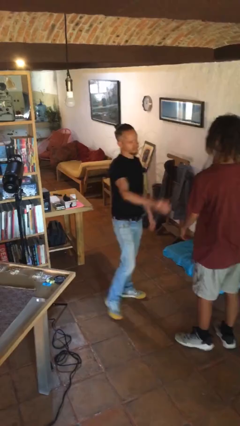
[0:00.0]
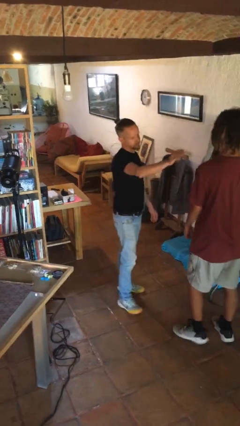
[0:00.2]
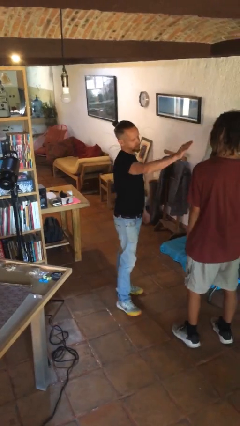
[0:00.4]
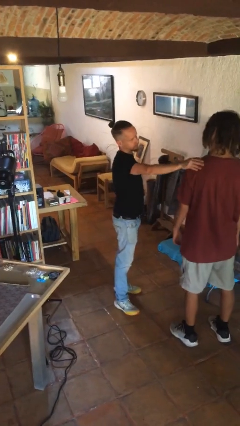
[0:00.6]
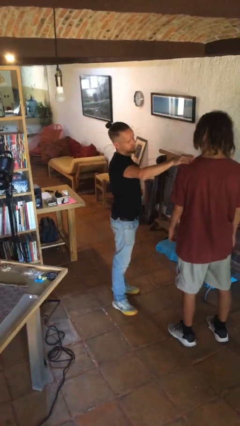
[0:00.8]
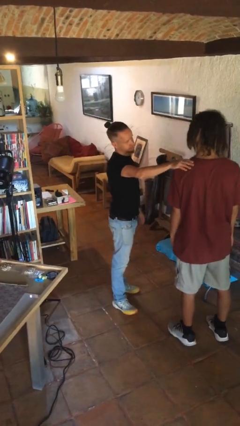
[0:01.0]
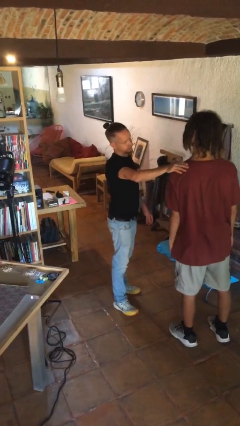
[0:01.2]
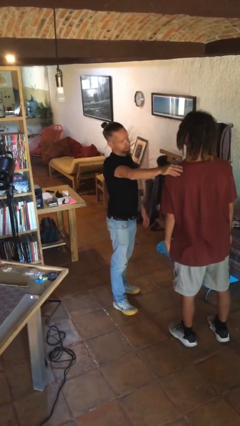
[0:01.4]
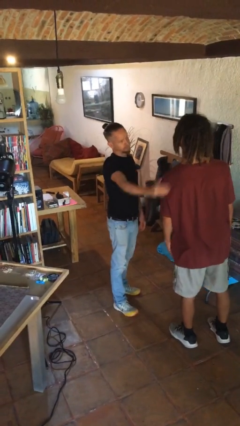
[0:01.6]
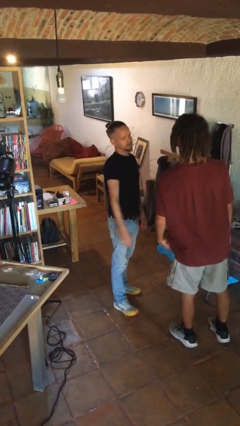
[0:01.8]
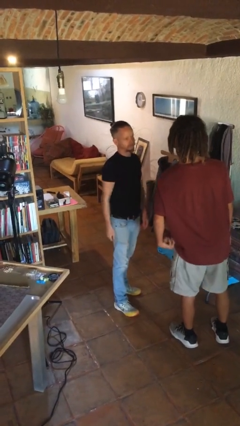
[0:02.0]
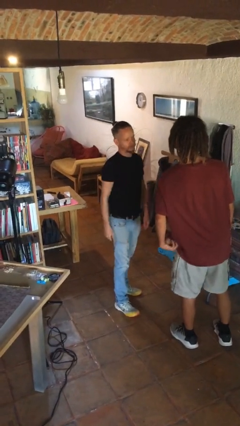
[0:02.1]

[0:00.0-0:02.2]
person pounds shoulders of person

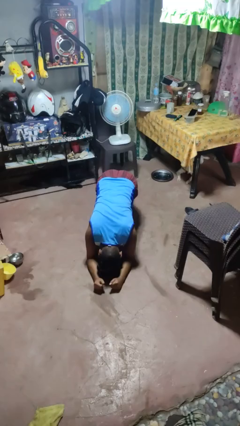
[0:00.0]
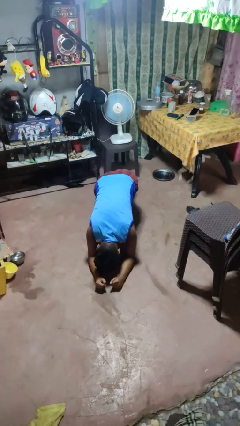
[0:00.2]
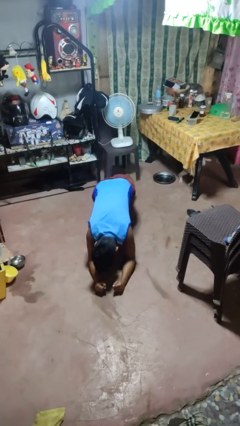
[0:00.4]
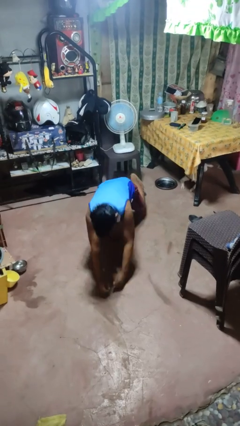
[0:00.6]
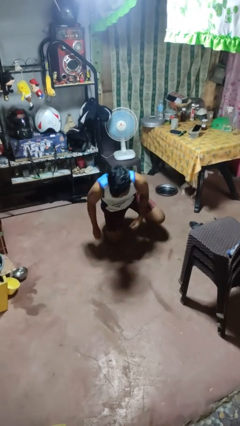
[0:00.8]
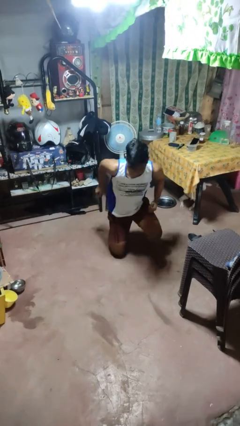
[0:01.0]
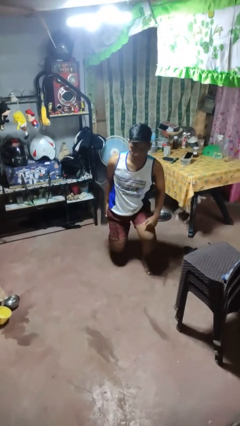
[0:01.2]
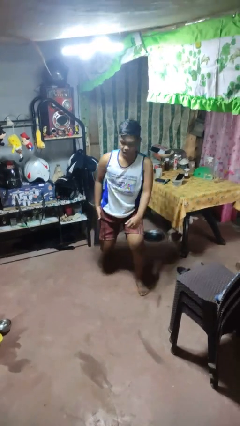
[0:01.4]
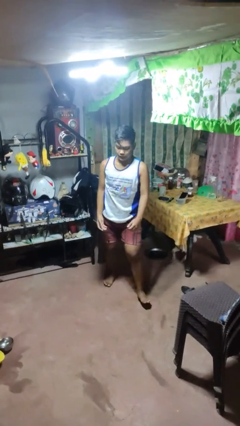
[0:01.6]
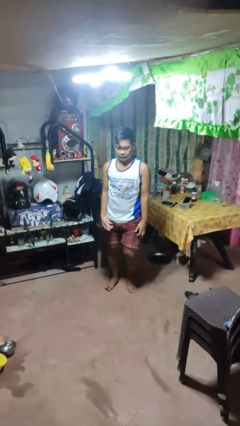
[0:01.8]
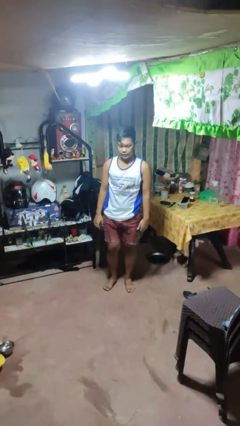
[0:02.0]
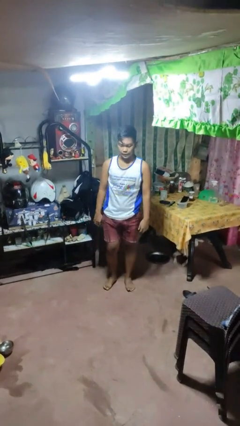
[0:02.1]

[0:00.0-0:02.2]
person stands up from floor

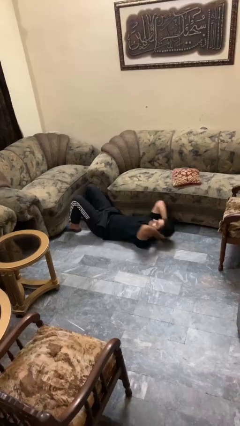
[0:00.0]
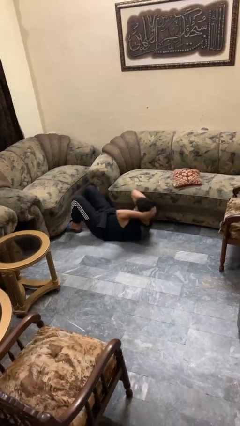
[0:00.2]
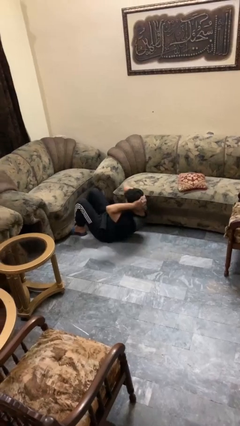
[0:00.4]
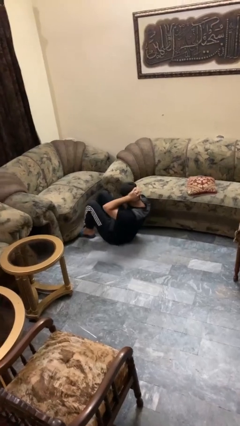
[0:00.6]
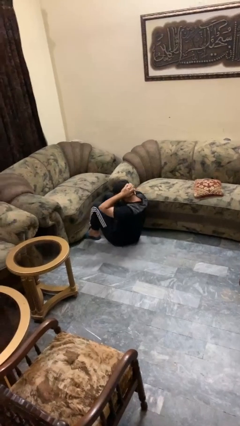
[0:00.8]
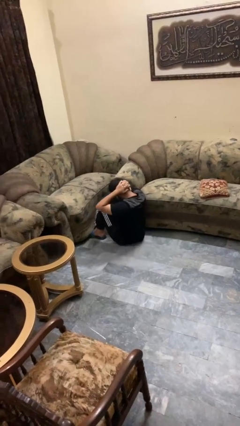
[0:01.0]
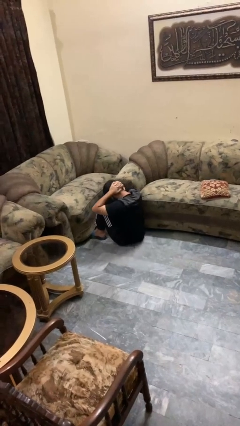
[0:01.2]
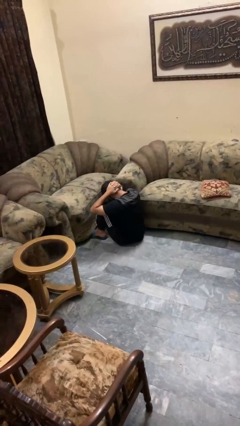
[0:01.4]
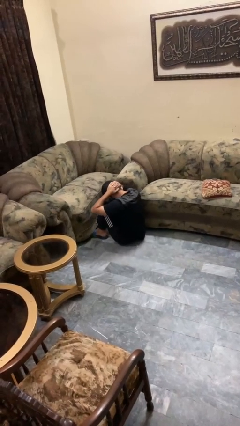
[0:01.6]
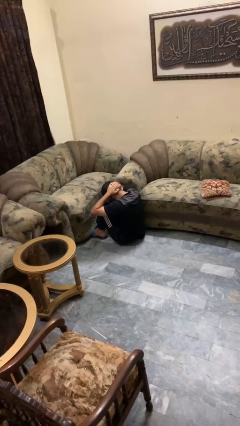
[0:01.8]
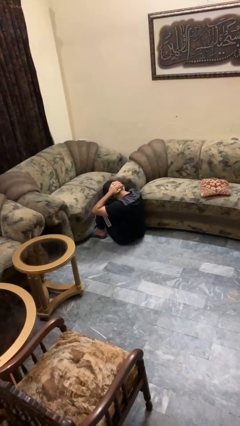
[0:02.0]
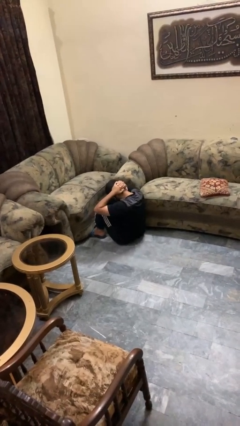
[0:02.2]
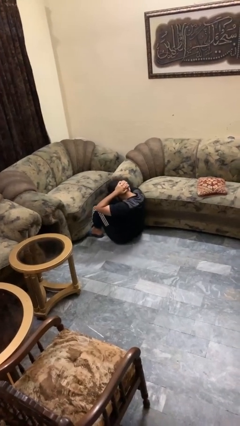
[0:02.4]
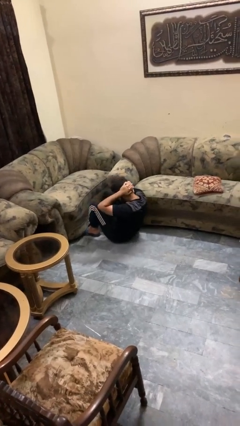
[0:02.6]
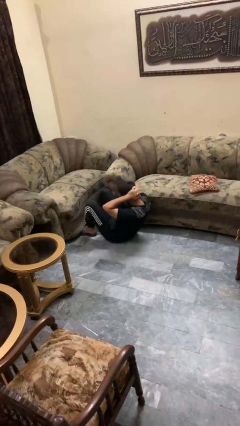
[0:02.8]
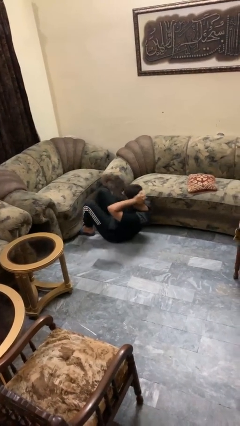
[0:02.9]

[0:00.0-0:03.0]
person exercises with situp

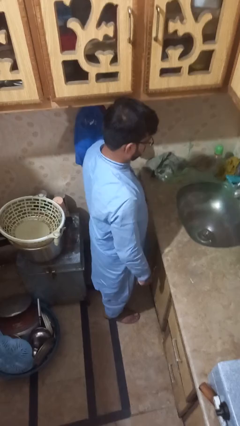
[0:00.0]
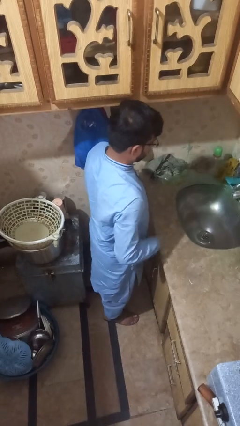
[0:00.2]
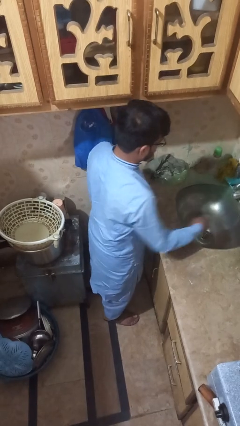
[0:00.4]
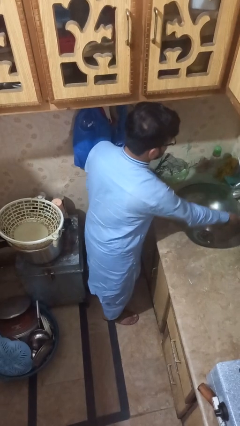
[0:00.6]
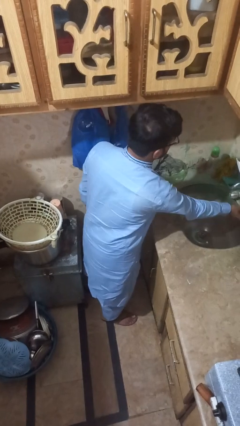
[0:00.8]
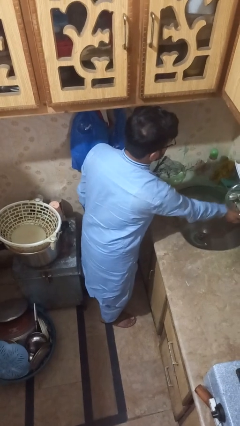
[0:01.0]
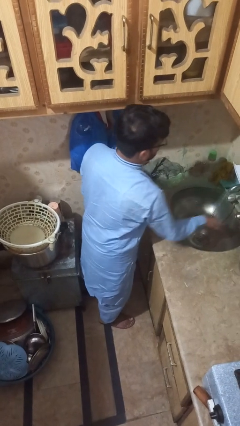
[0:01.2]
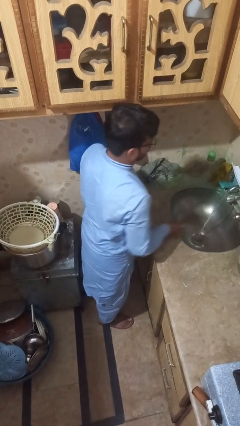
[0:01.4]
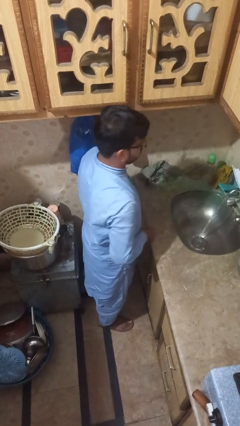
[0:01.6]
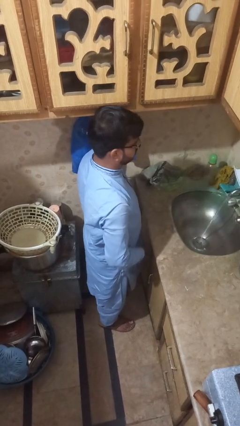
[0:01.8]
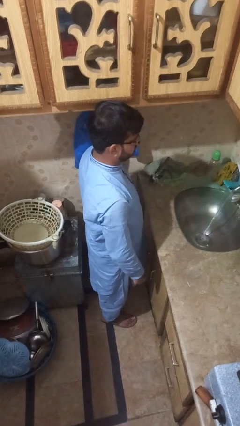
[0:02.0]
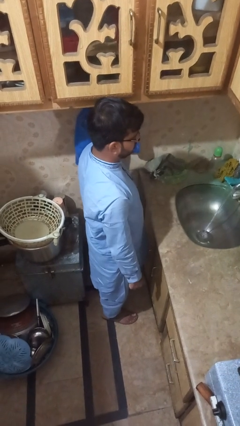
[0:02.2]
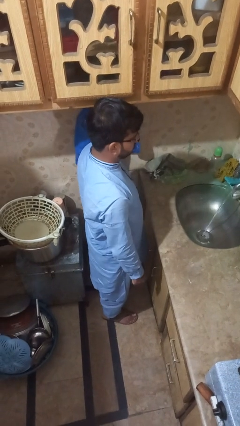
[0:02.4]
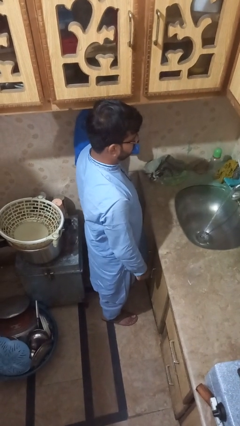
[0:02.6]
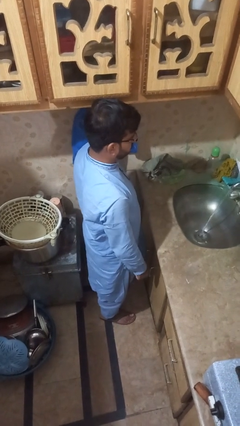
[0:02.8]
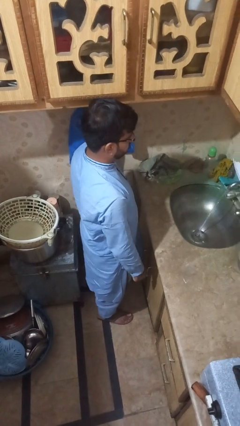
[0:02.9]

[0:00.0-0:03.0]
person turns on faucet

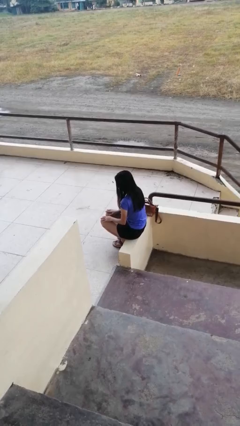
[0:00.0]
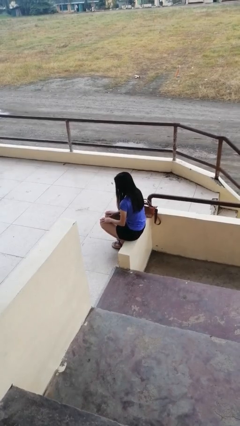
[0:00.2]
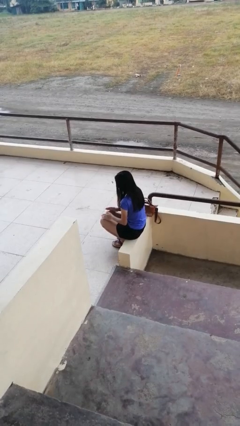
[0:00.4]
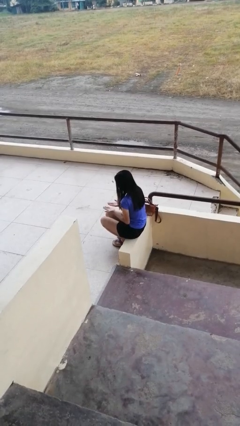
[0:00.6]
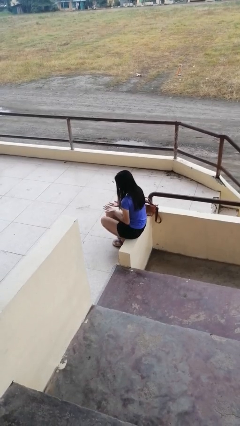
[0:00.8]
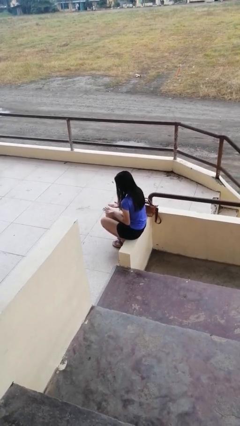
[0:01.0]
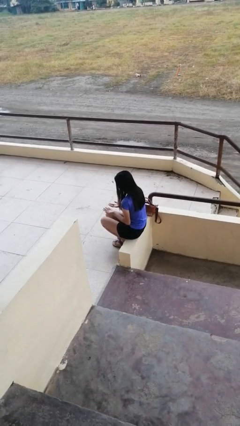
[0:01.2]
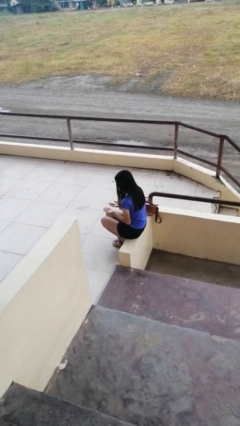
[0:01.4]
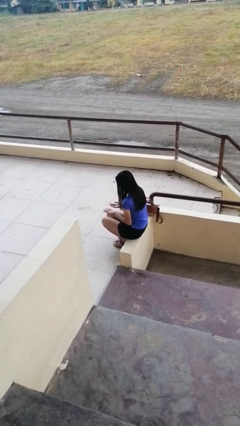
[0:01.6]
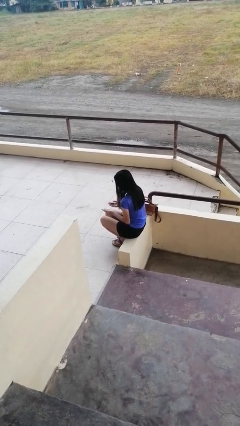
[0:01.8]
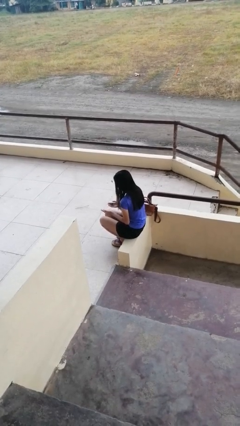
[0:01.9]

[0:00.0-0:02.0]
person looks at hands in lap

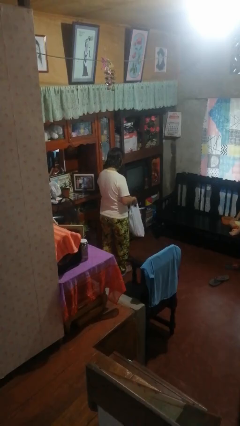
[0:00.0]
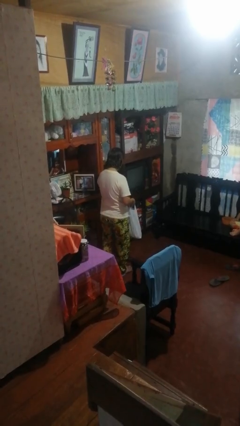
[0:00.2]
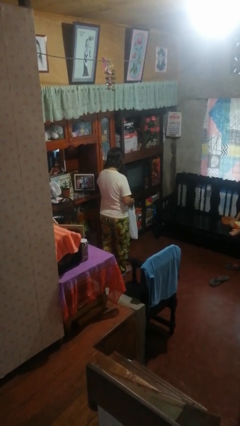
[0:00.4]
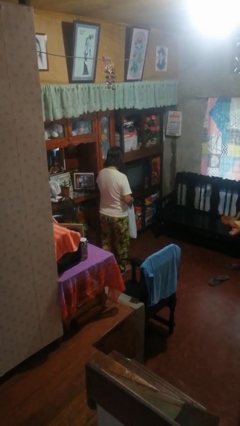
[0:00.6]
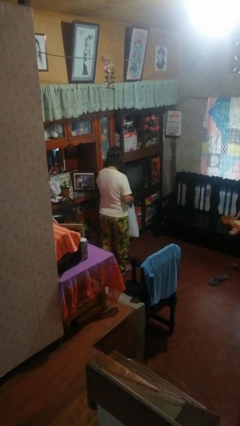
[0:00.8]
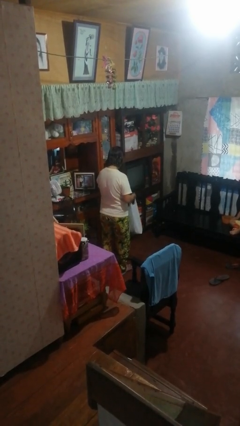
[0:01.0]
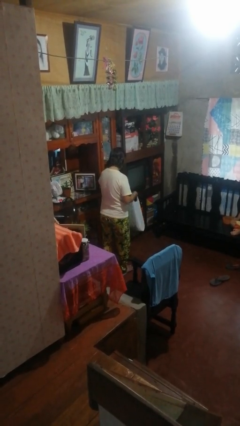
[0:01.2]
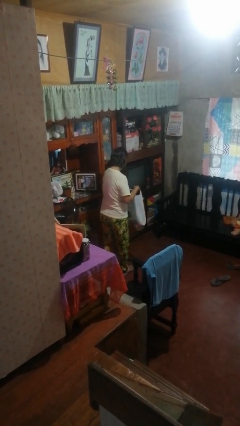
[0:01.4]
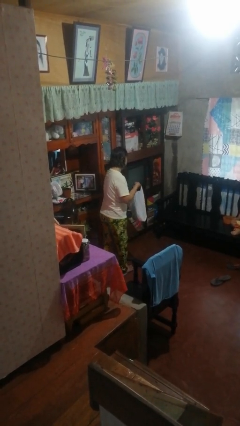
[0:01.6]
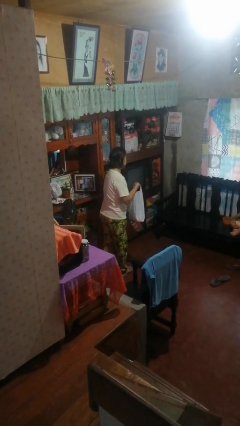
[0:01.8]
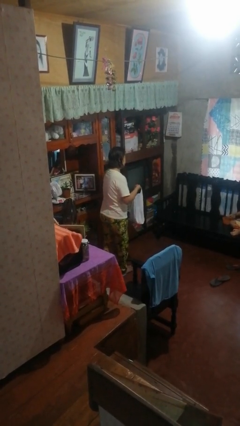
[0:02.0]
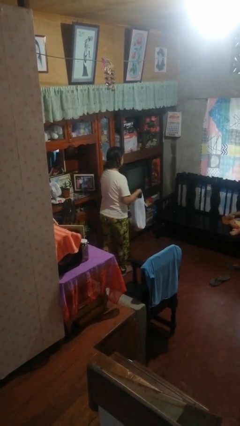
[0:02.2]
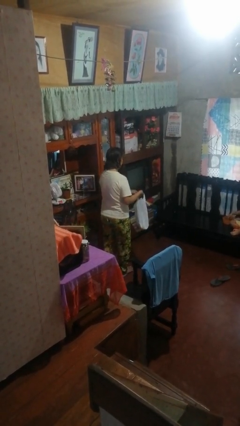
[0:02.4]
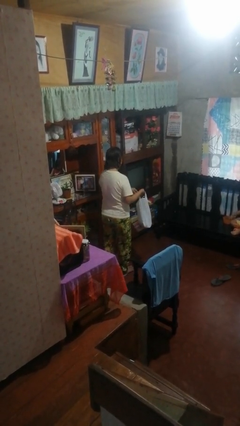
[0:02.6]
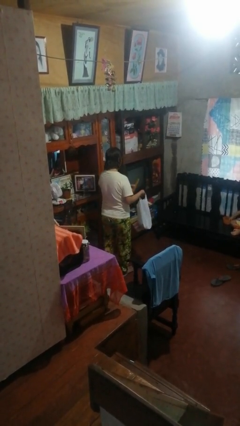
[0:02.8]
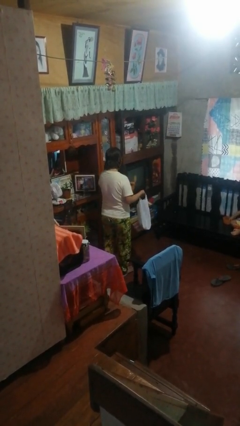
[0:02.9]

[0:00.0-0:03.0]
person takes object from bag

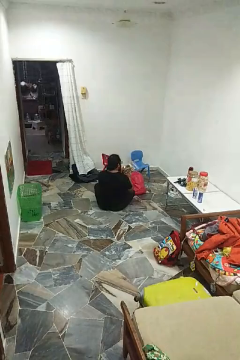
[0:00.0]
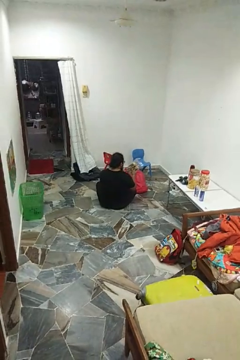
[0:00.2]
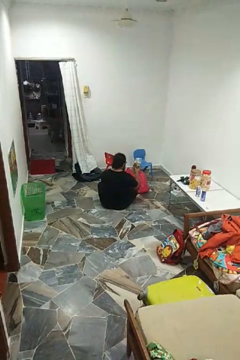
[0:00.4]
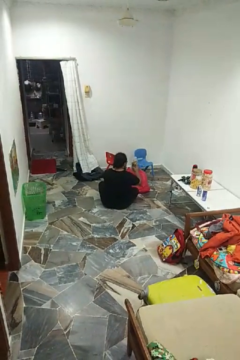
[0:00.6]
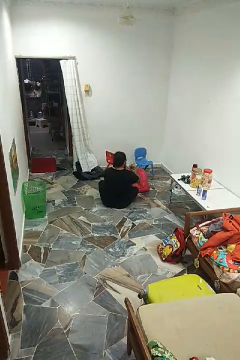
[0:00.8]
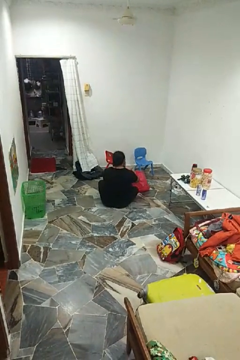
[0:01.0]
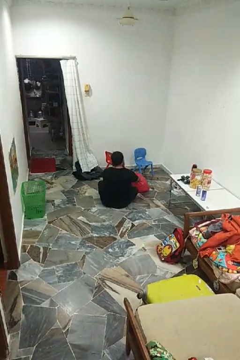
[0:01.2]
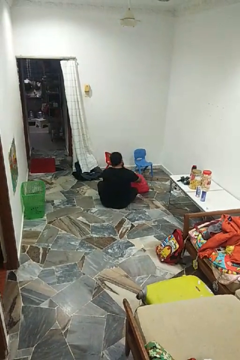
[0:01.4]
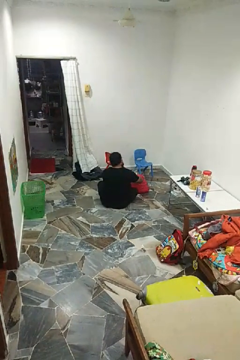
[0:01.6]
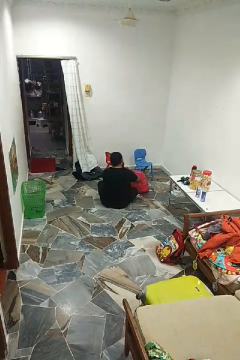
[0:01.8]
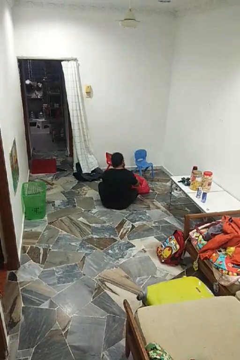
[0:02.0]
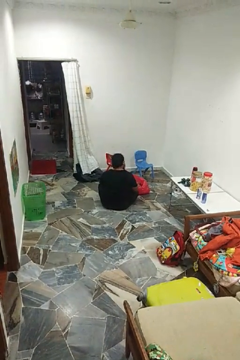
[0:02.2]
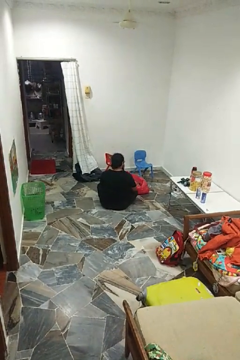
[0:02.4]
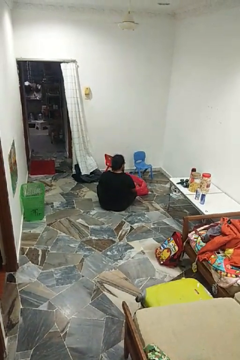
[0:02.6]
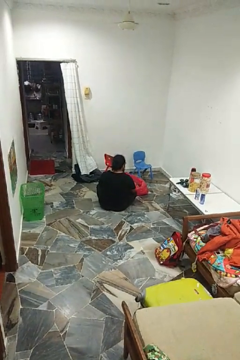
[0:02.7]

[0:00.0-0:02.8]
person puts object into bag
